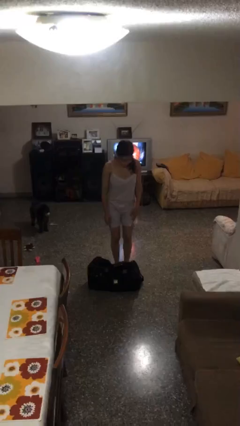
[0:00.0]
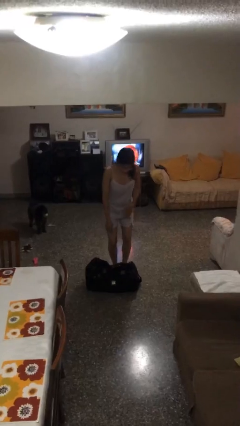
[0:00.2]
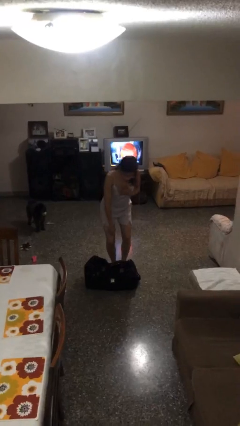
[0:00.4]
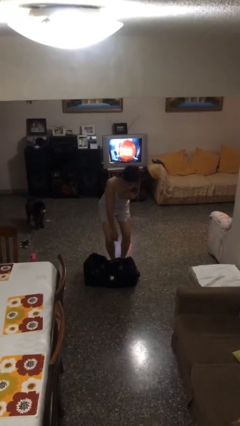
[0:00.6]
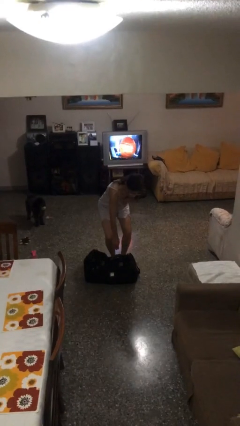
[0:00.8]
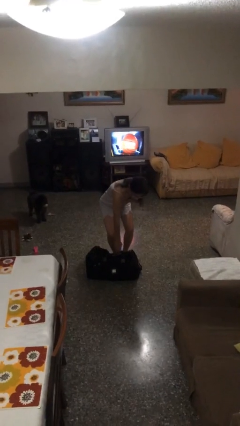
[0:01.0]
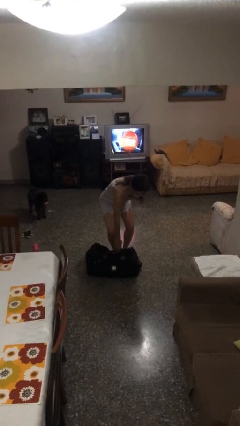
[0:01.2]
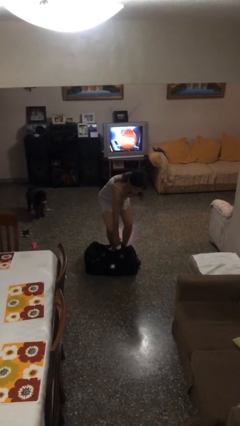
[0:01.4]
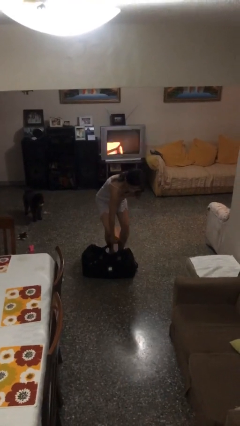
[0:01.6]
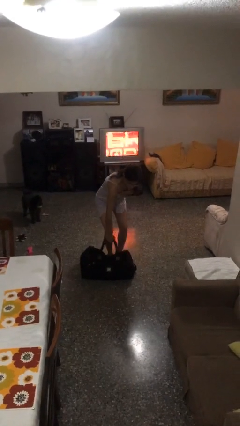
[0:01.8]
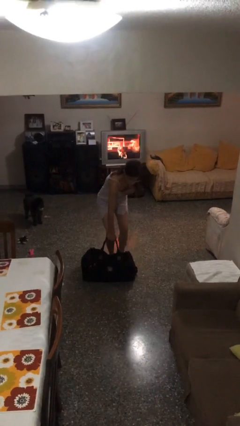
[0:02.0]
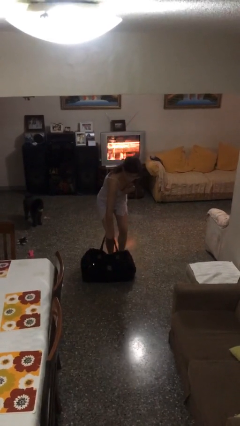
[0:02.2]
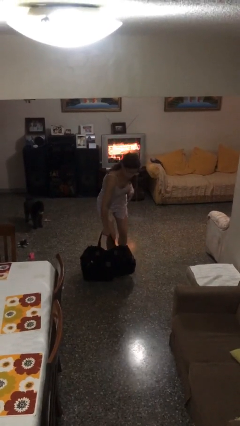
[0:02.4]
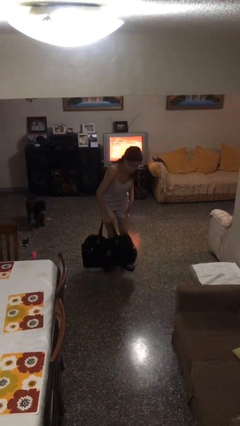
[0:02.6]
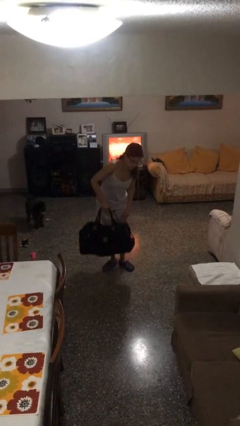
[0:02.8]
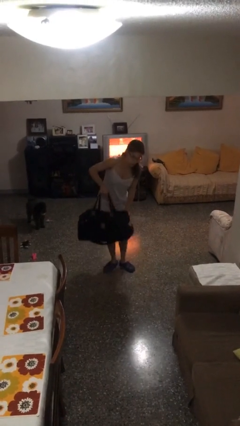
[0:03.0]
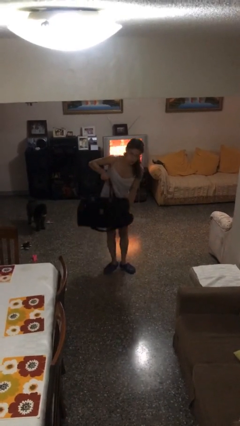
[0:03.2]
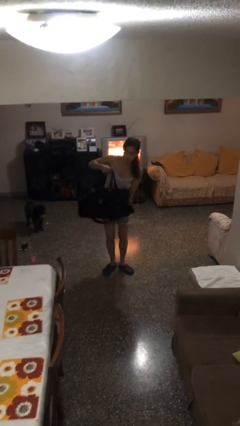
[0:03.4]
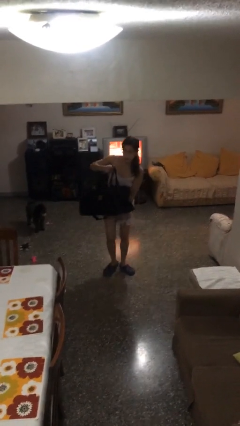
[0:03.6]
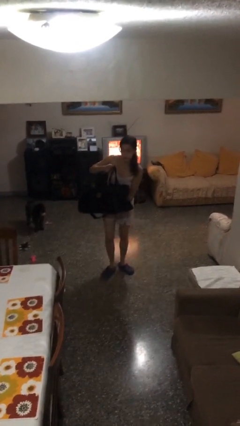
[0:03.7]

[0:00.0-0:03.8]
person picks up object from floor

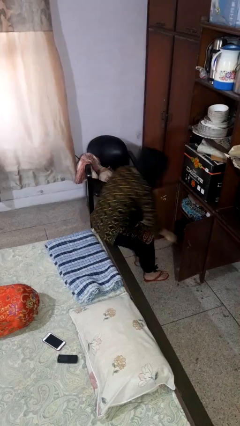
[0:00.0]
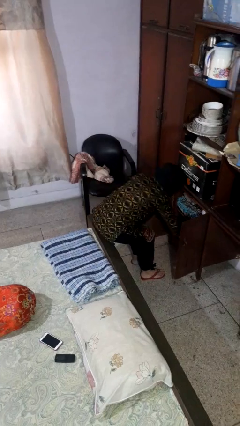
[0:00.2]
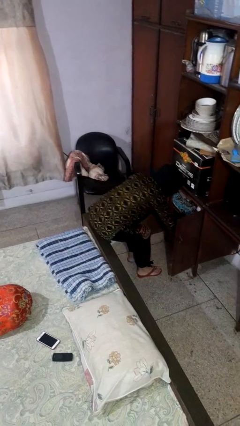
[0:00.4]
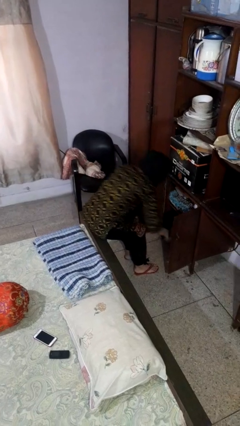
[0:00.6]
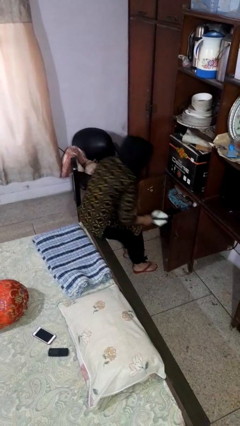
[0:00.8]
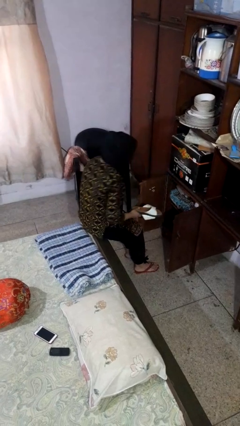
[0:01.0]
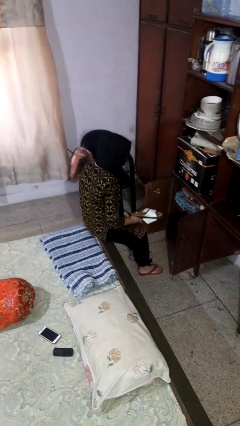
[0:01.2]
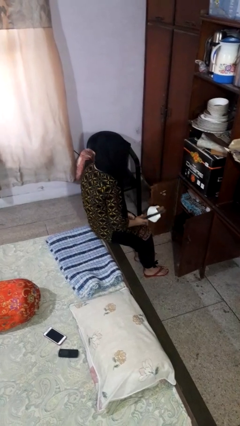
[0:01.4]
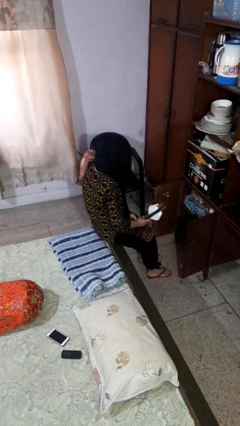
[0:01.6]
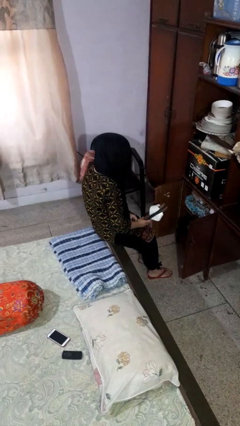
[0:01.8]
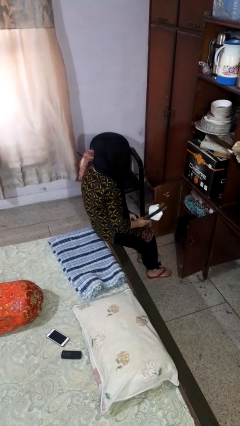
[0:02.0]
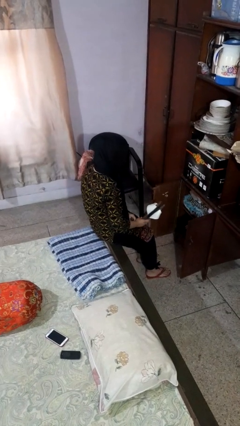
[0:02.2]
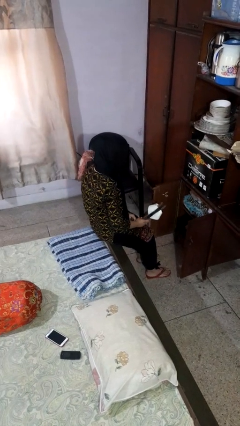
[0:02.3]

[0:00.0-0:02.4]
person takes object from cabinet

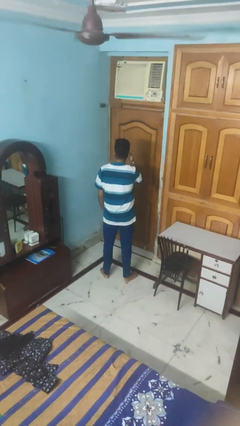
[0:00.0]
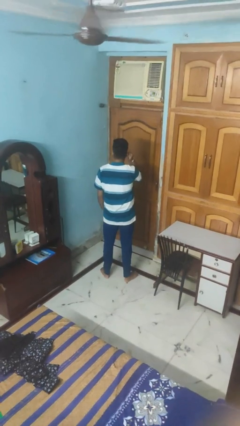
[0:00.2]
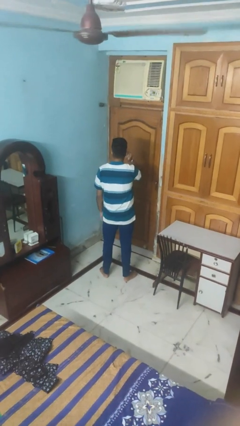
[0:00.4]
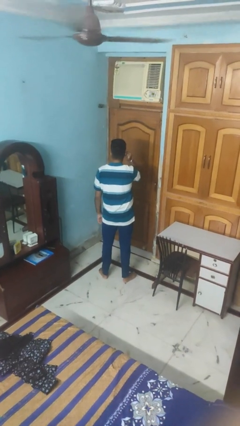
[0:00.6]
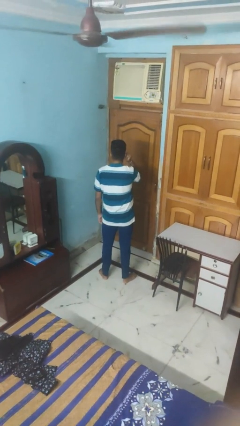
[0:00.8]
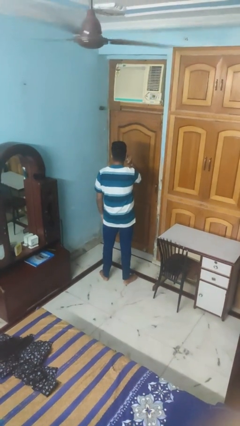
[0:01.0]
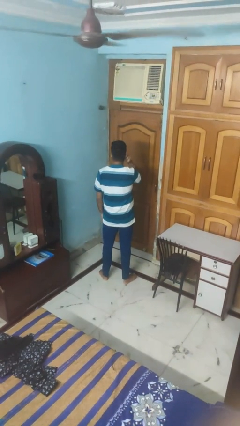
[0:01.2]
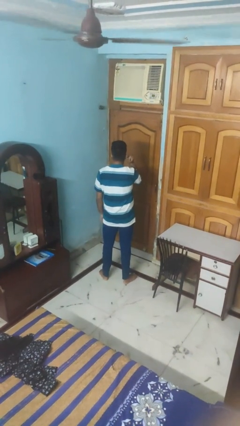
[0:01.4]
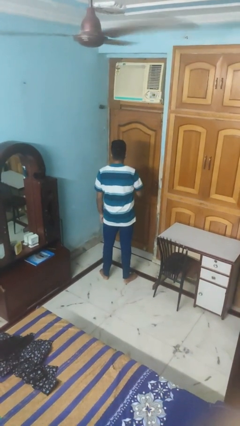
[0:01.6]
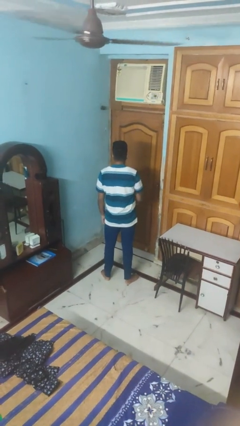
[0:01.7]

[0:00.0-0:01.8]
person touches earlobe

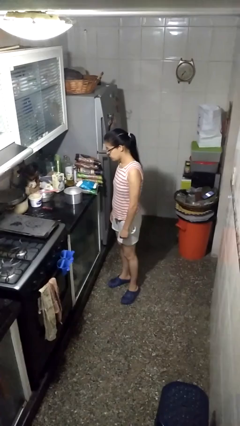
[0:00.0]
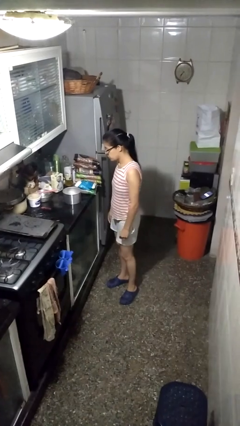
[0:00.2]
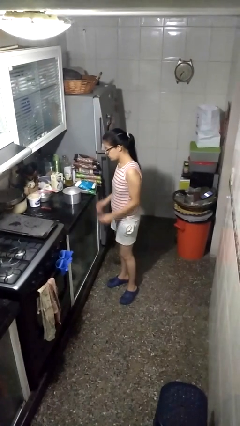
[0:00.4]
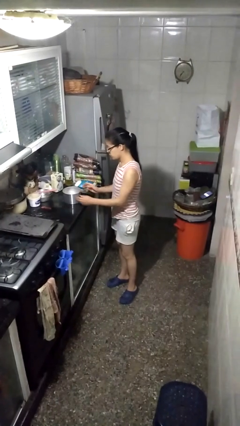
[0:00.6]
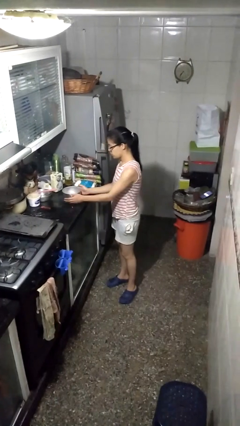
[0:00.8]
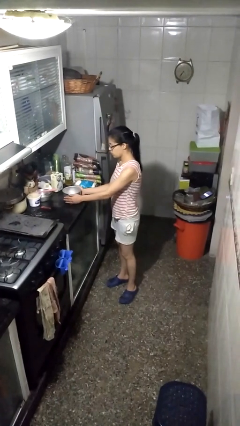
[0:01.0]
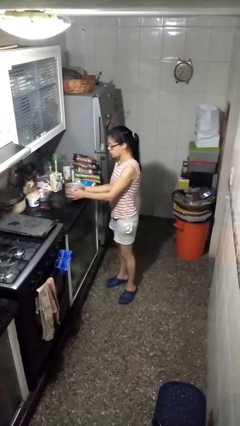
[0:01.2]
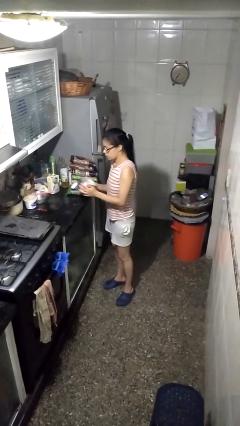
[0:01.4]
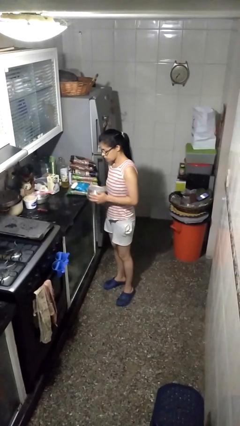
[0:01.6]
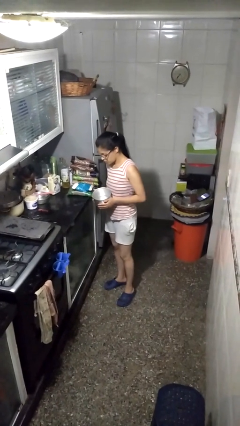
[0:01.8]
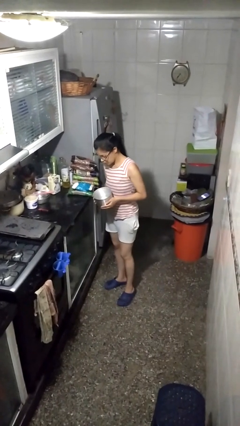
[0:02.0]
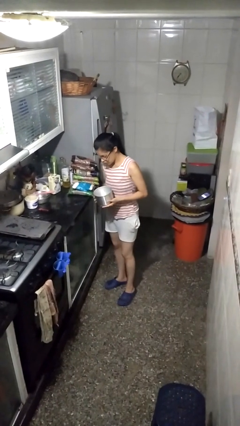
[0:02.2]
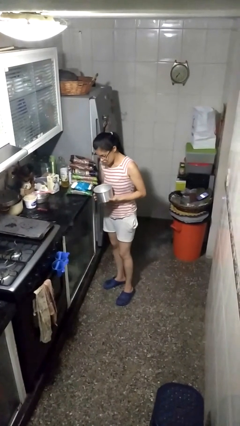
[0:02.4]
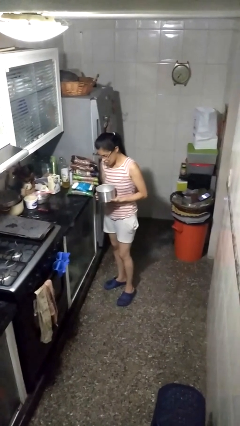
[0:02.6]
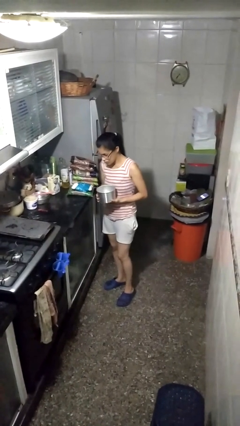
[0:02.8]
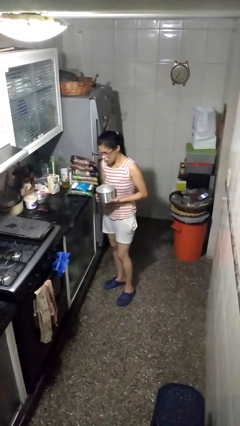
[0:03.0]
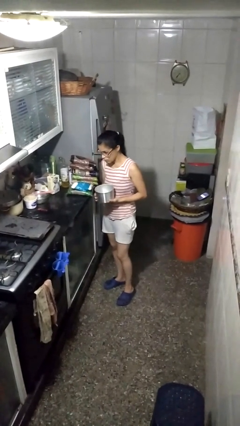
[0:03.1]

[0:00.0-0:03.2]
person picks up object from countertop

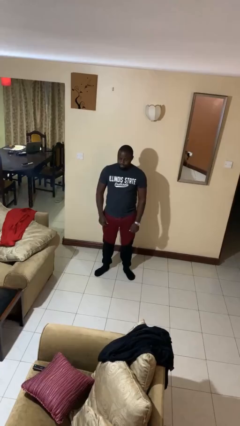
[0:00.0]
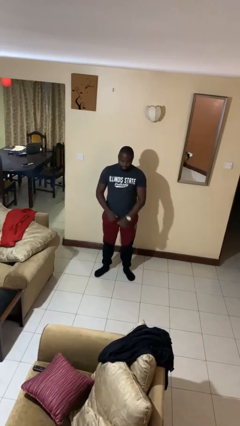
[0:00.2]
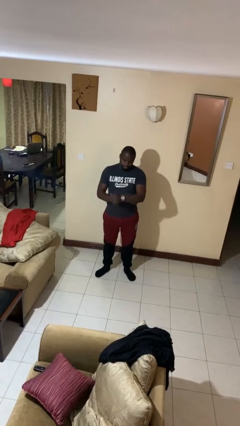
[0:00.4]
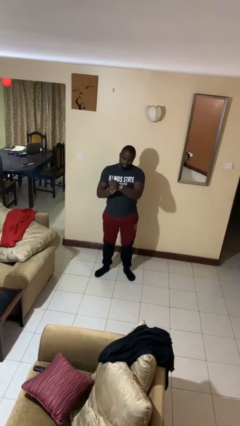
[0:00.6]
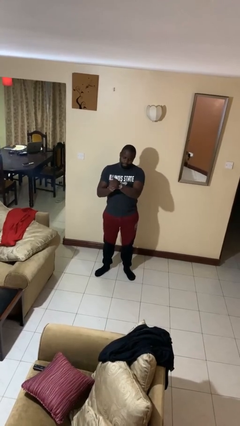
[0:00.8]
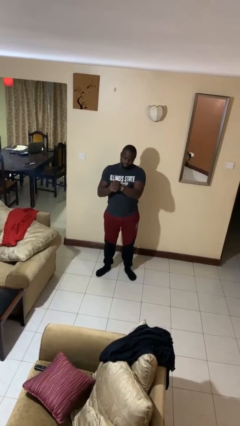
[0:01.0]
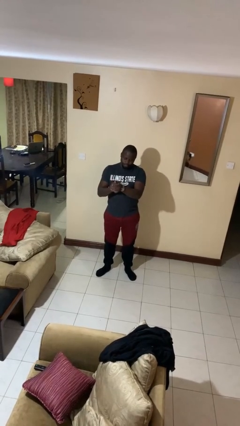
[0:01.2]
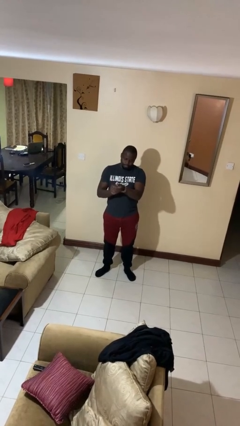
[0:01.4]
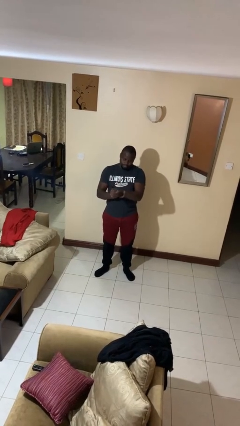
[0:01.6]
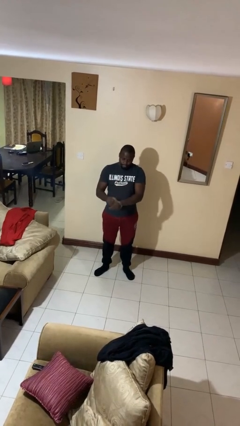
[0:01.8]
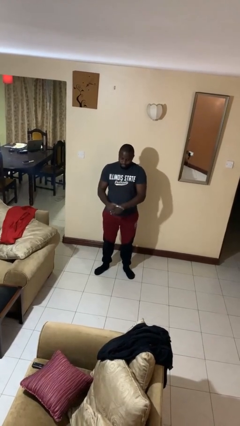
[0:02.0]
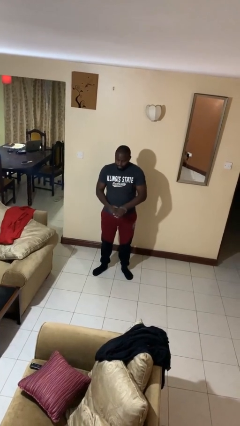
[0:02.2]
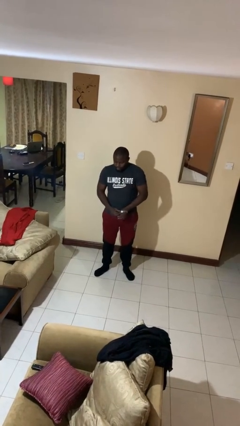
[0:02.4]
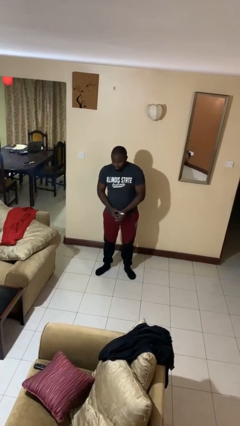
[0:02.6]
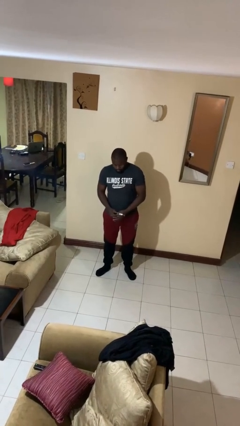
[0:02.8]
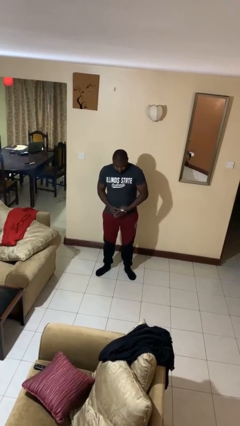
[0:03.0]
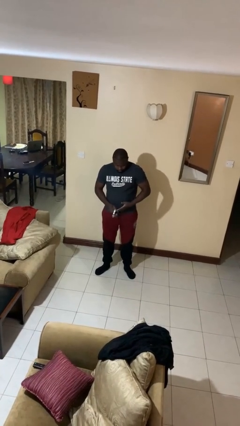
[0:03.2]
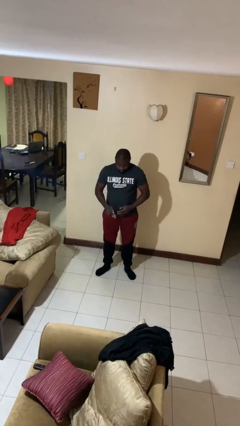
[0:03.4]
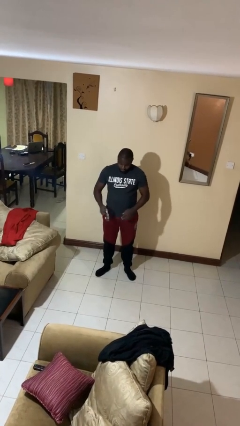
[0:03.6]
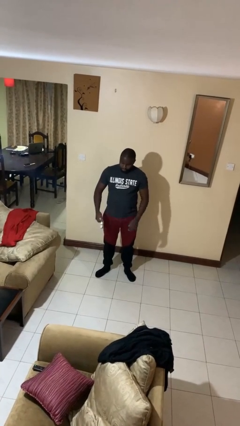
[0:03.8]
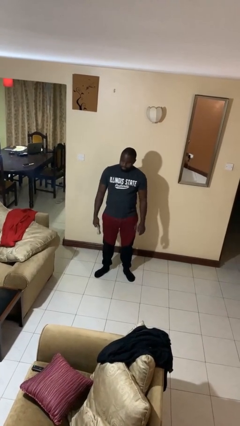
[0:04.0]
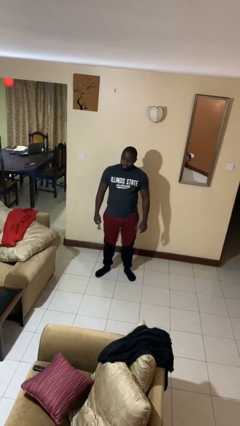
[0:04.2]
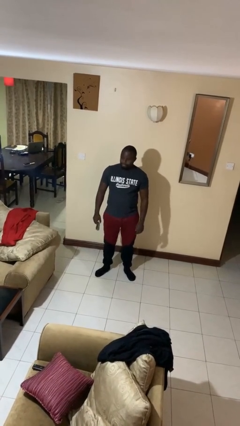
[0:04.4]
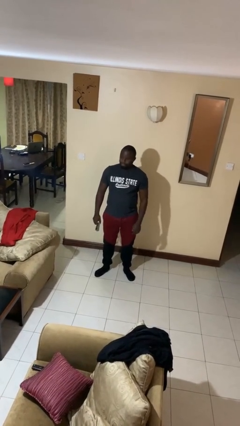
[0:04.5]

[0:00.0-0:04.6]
person takes off wristwatch

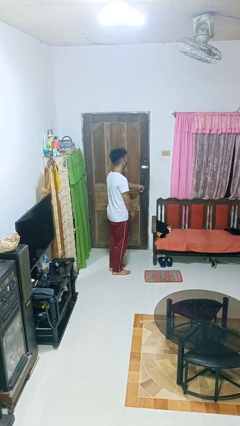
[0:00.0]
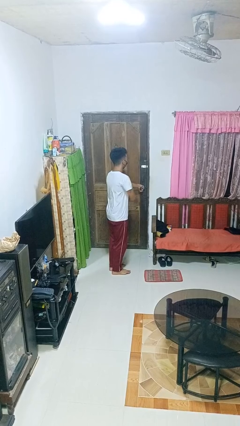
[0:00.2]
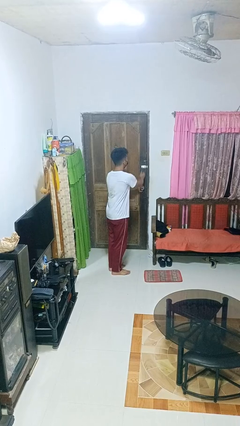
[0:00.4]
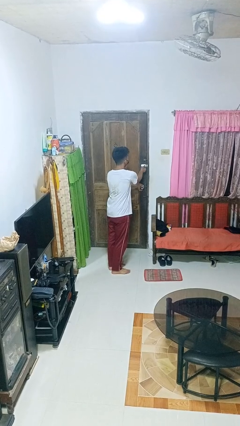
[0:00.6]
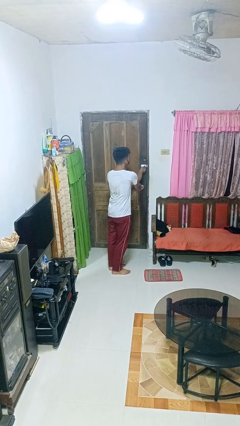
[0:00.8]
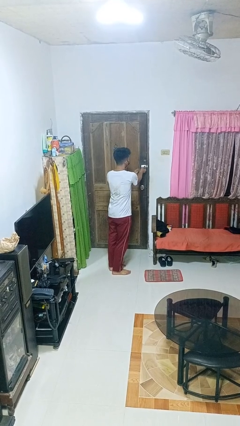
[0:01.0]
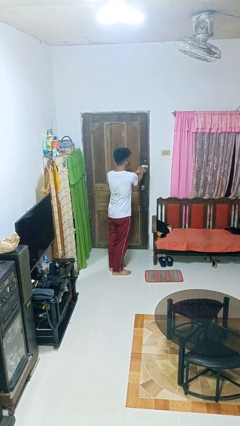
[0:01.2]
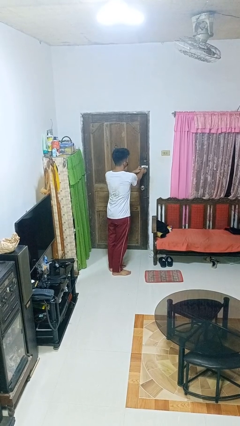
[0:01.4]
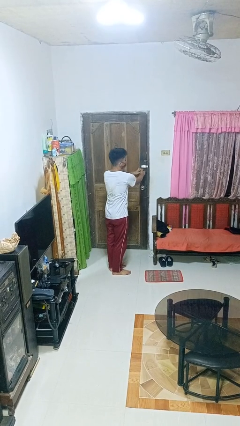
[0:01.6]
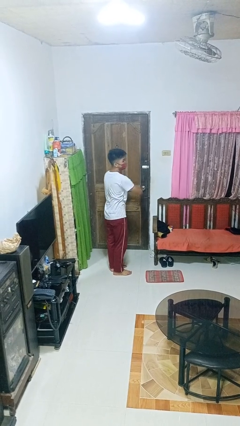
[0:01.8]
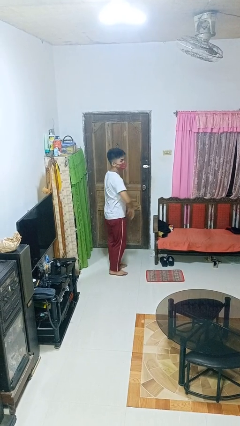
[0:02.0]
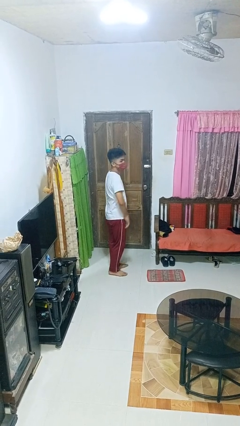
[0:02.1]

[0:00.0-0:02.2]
person locks door with keys
